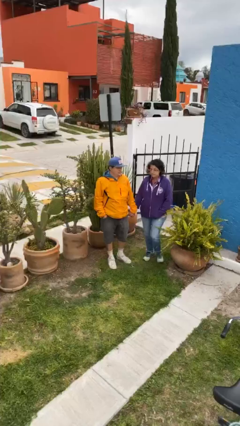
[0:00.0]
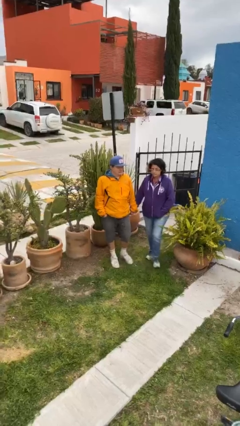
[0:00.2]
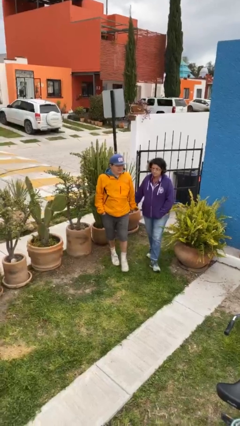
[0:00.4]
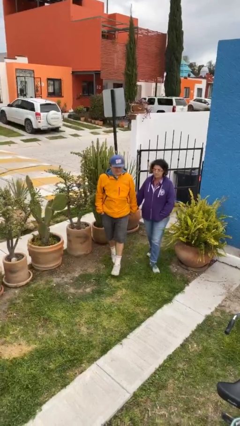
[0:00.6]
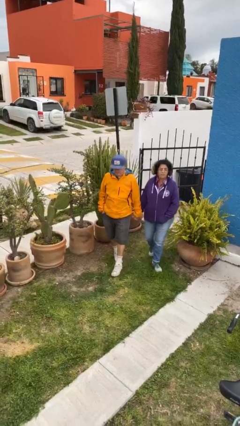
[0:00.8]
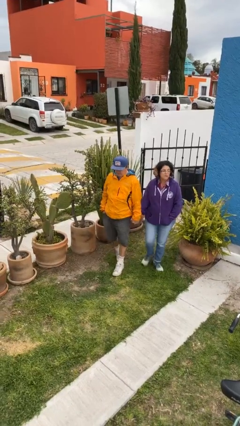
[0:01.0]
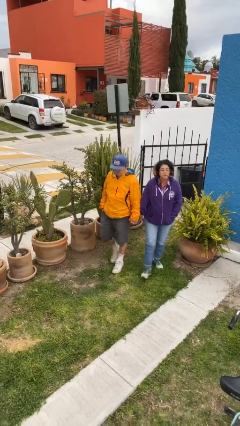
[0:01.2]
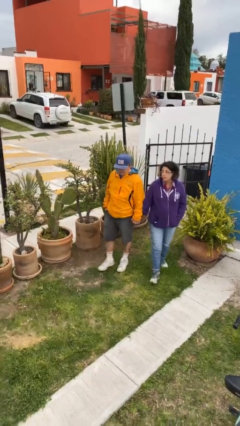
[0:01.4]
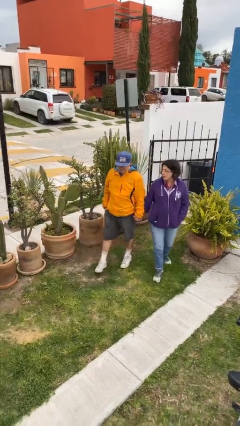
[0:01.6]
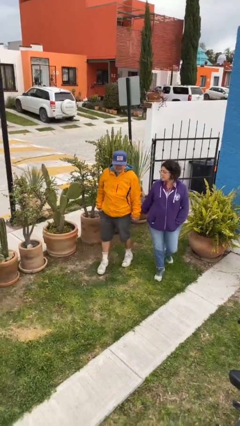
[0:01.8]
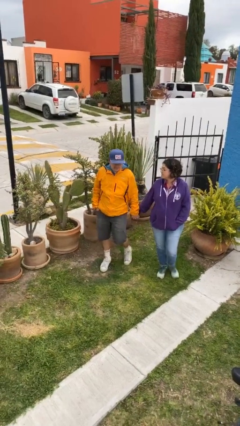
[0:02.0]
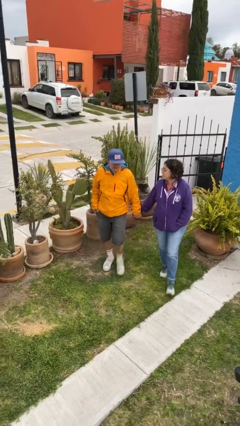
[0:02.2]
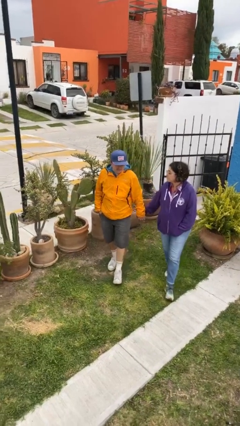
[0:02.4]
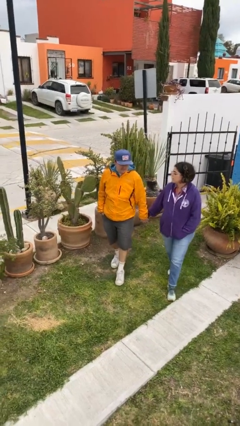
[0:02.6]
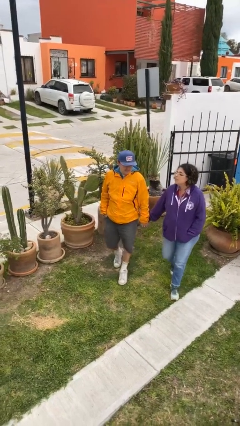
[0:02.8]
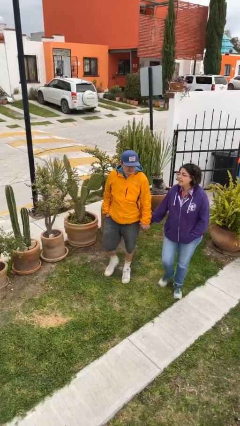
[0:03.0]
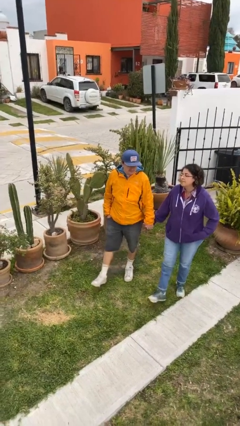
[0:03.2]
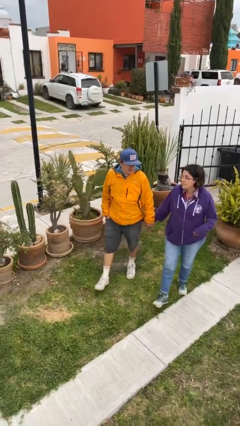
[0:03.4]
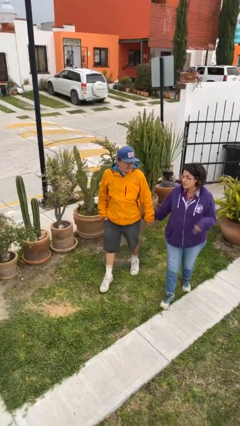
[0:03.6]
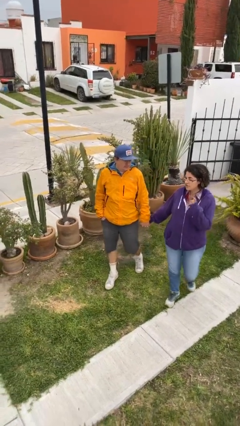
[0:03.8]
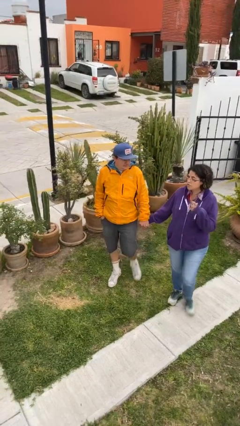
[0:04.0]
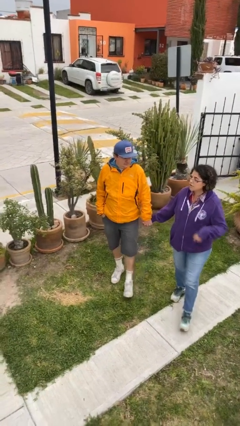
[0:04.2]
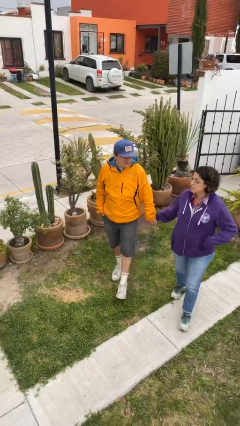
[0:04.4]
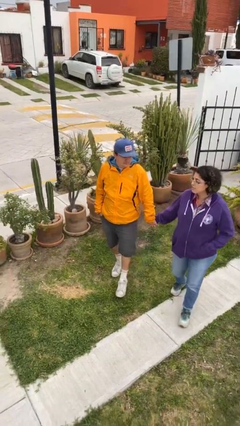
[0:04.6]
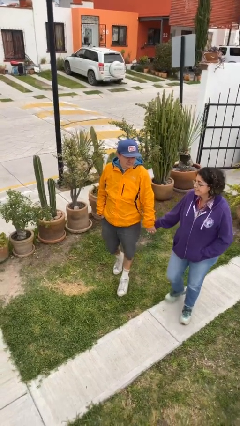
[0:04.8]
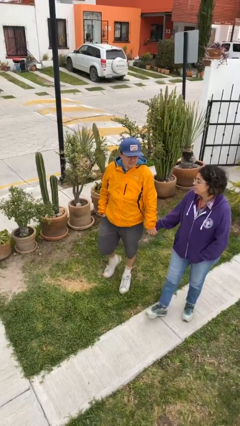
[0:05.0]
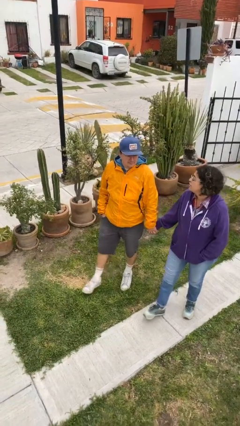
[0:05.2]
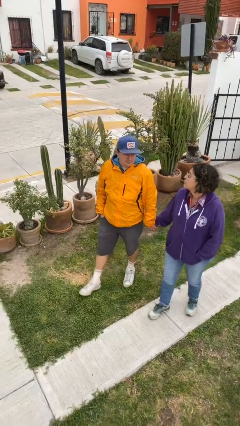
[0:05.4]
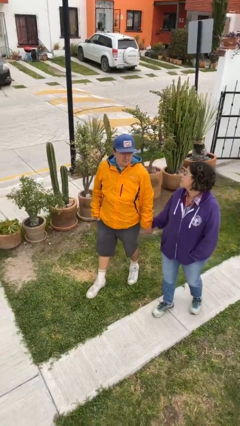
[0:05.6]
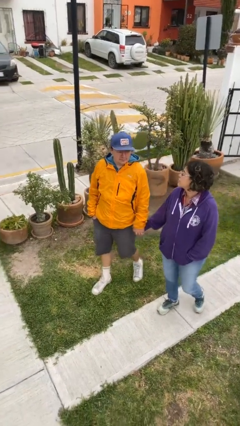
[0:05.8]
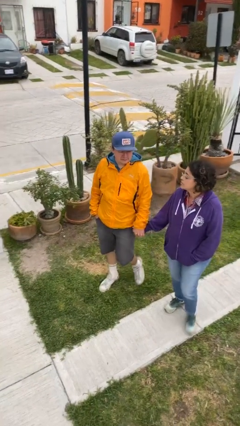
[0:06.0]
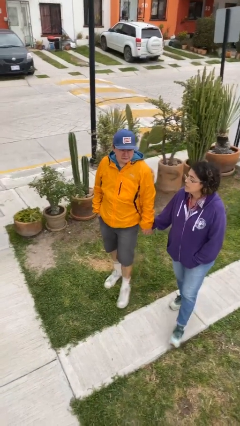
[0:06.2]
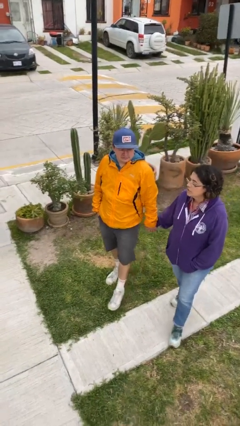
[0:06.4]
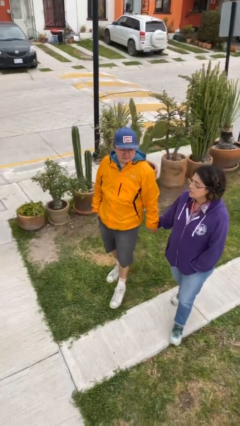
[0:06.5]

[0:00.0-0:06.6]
person holds hand

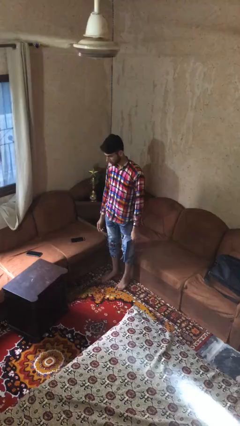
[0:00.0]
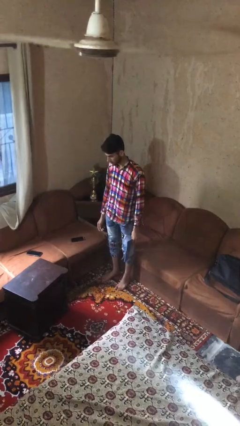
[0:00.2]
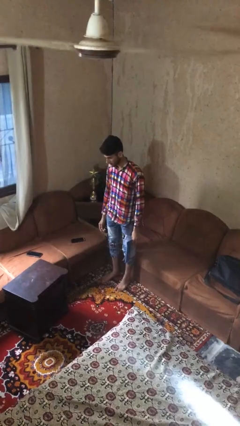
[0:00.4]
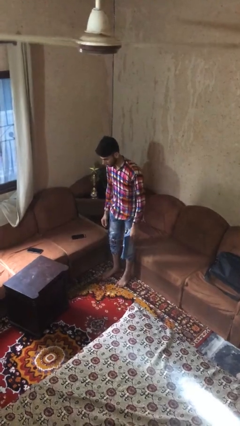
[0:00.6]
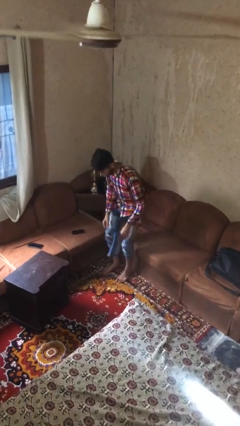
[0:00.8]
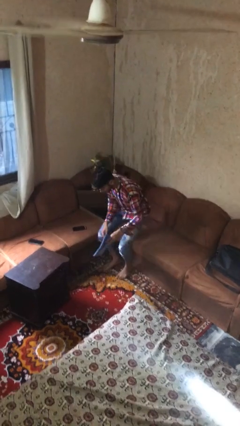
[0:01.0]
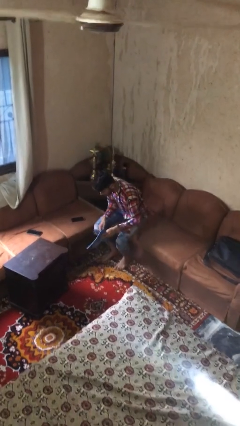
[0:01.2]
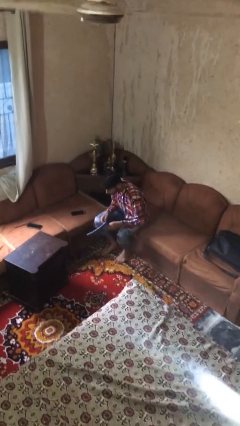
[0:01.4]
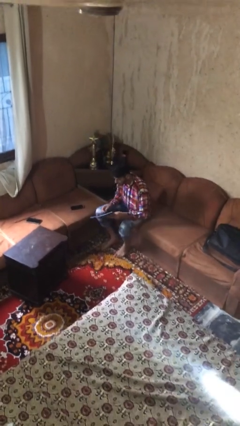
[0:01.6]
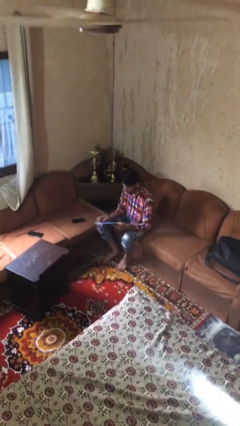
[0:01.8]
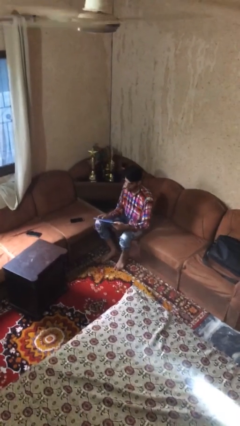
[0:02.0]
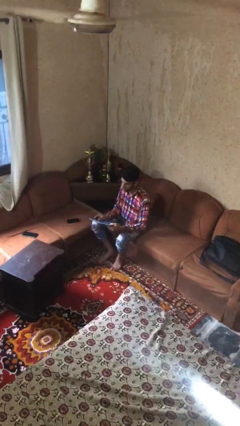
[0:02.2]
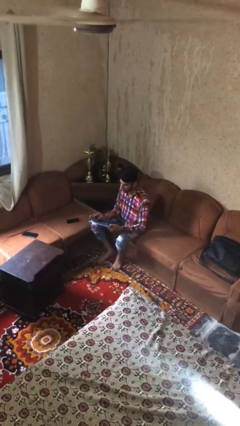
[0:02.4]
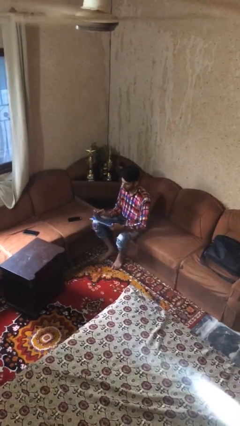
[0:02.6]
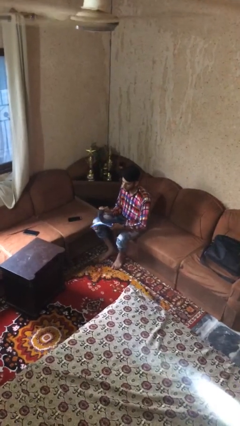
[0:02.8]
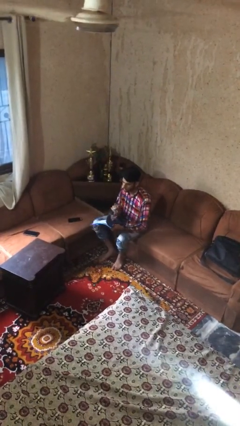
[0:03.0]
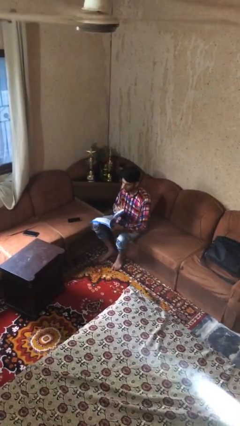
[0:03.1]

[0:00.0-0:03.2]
person sits down

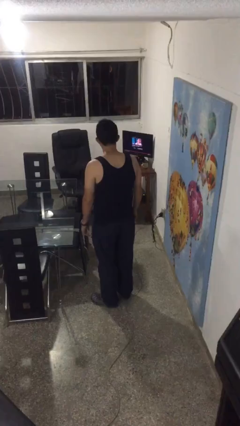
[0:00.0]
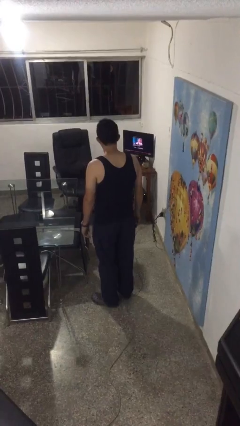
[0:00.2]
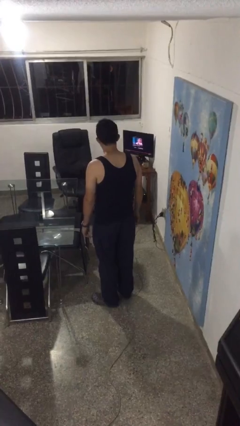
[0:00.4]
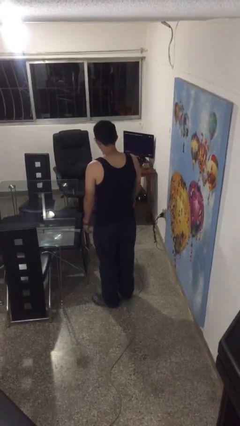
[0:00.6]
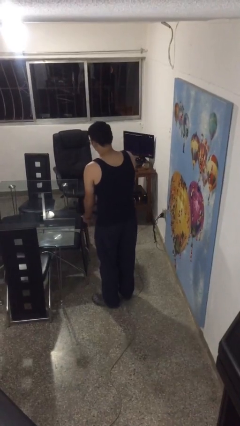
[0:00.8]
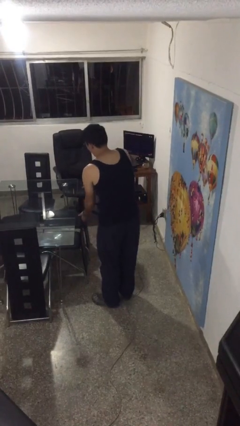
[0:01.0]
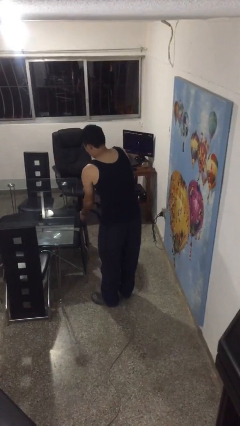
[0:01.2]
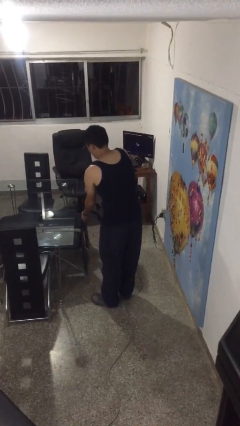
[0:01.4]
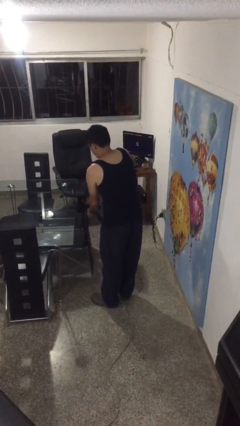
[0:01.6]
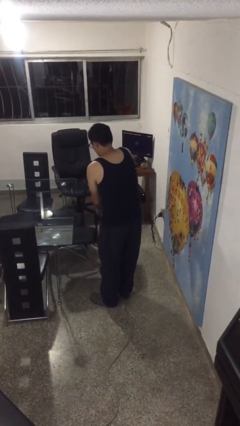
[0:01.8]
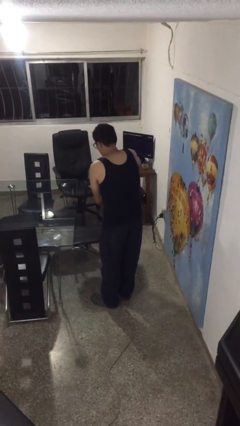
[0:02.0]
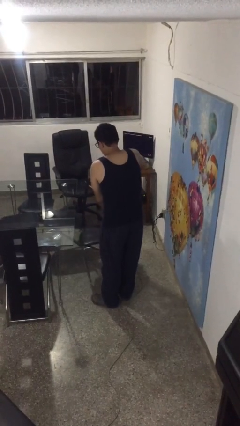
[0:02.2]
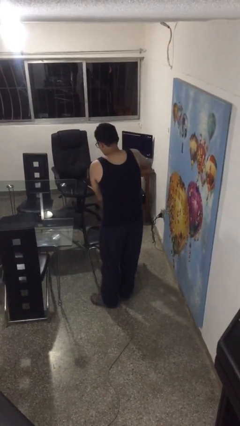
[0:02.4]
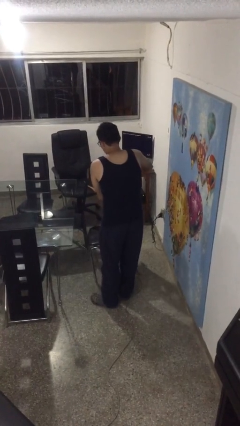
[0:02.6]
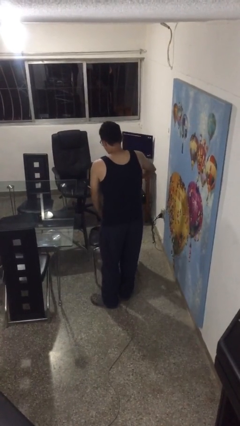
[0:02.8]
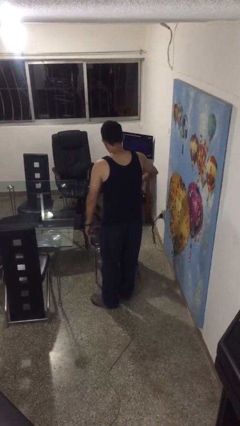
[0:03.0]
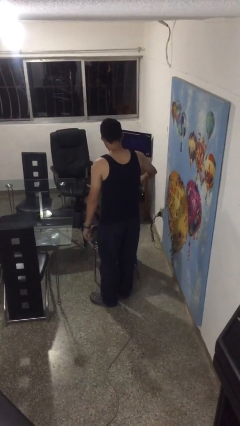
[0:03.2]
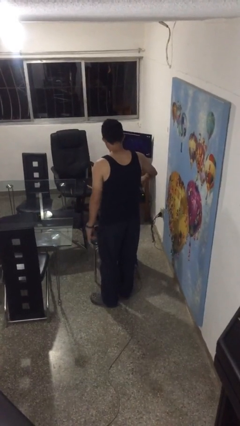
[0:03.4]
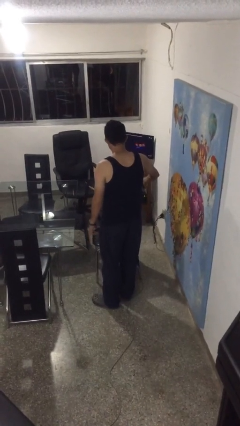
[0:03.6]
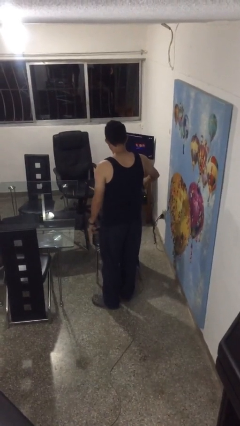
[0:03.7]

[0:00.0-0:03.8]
person pulls out chair

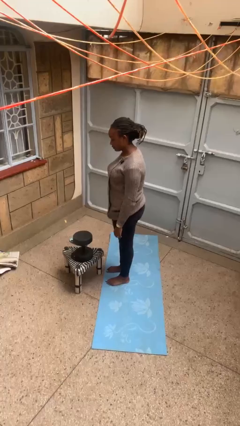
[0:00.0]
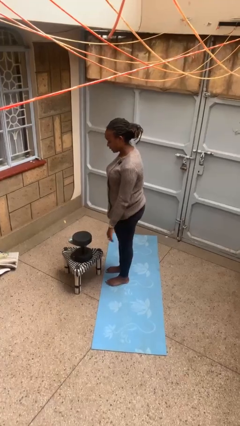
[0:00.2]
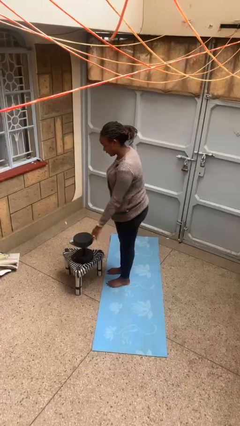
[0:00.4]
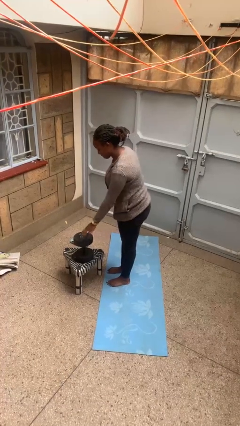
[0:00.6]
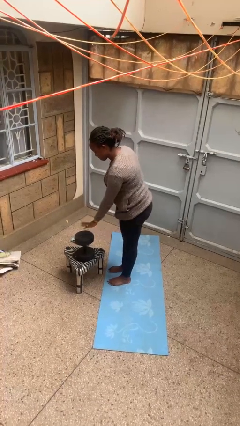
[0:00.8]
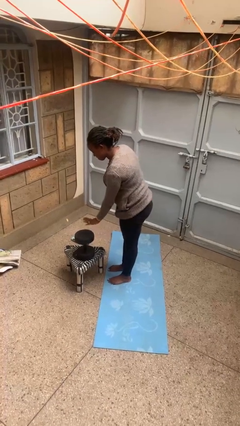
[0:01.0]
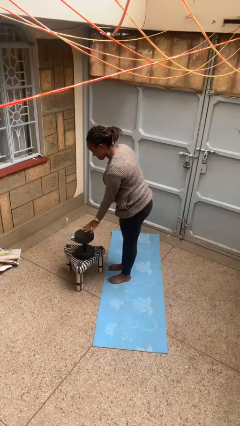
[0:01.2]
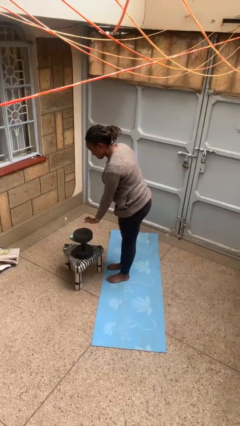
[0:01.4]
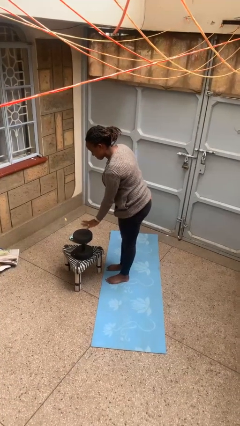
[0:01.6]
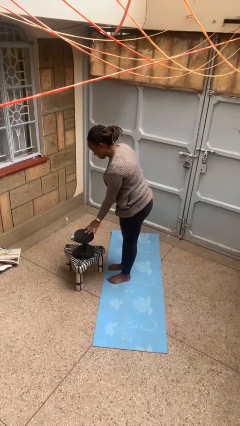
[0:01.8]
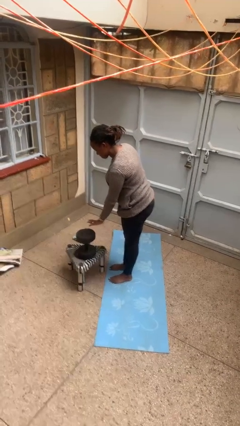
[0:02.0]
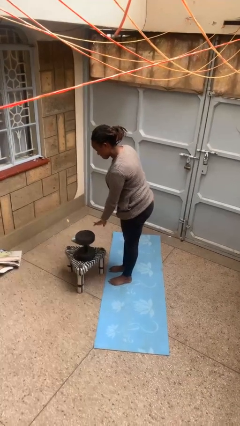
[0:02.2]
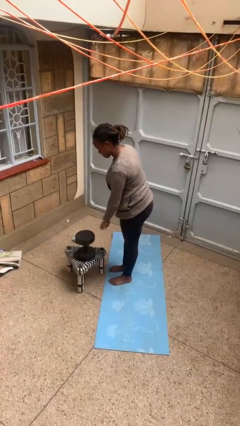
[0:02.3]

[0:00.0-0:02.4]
person waves hand over object

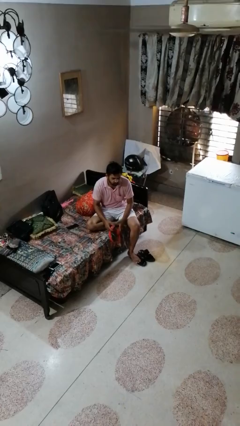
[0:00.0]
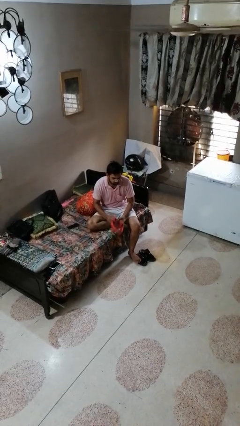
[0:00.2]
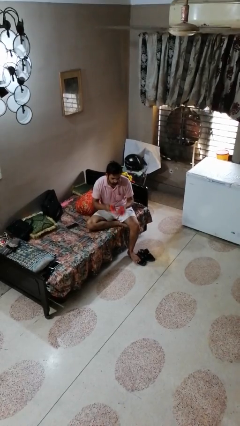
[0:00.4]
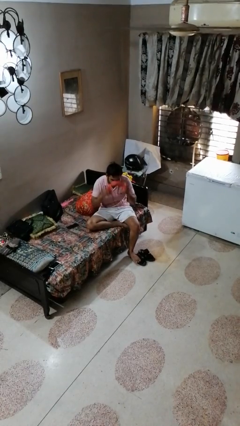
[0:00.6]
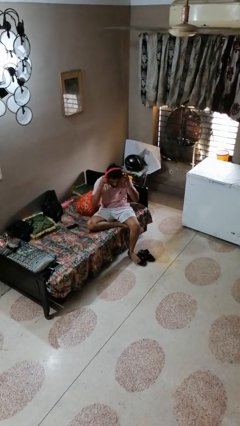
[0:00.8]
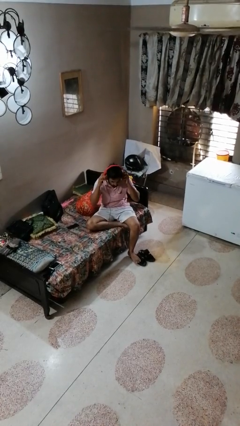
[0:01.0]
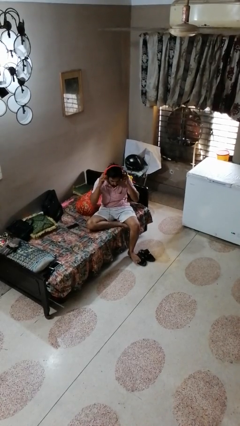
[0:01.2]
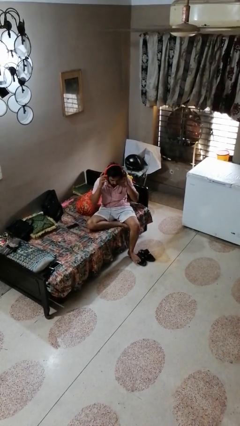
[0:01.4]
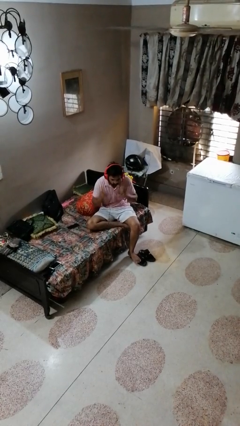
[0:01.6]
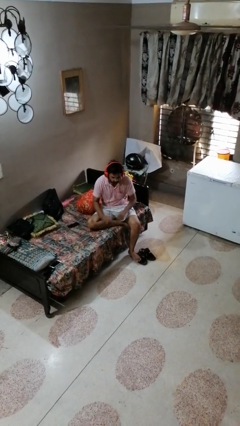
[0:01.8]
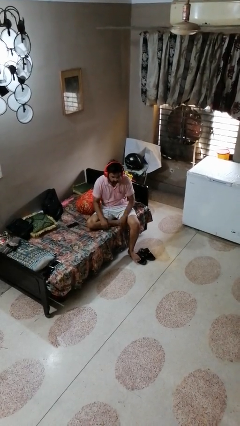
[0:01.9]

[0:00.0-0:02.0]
person puts on headphones
